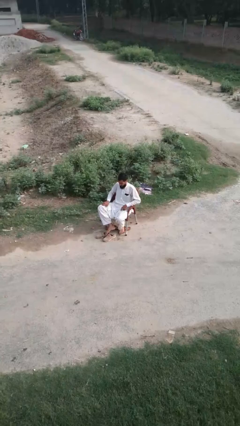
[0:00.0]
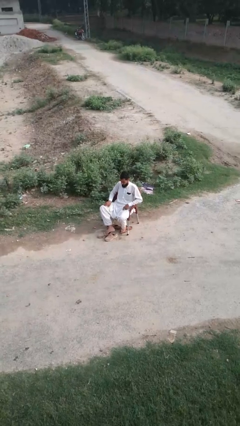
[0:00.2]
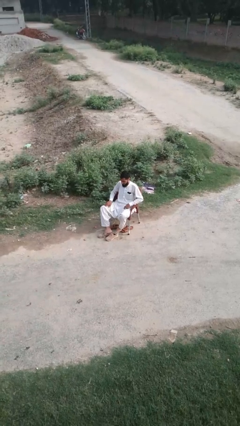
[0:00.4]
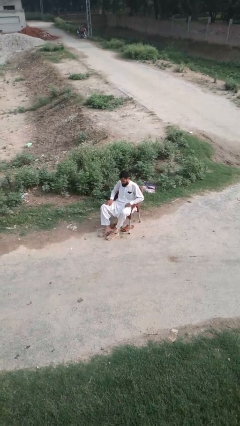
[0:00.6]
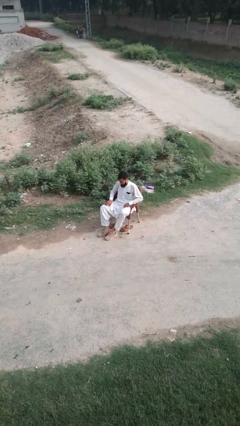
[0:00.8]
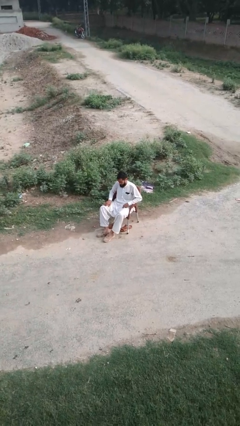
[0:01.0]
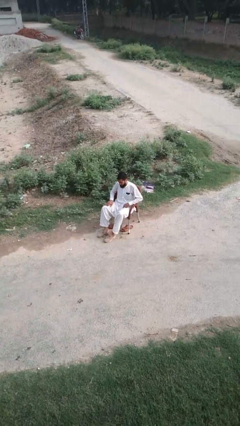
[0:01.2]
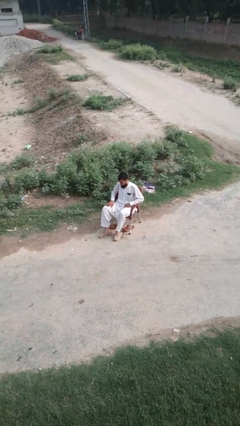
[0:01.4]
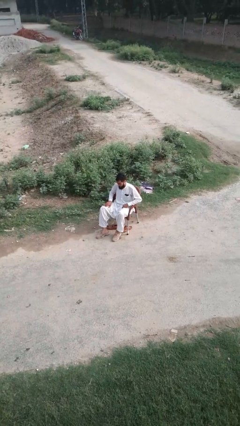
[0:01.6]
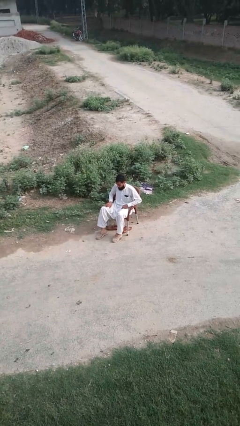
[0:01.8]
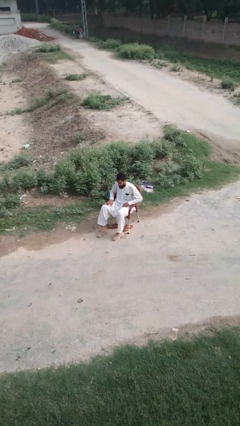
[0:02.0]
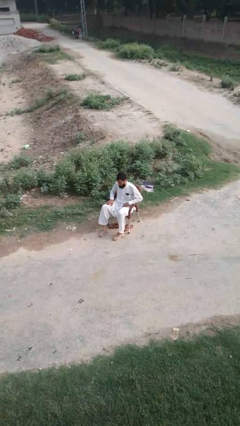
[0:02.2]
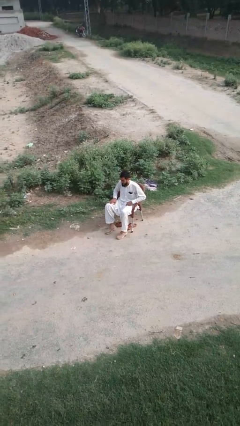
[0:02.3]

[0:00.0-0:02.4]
person puts on shoes

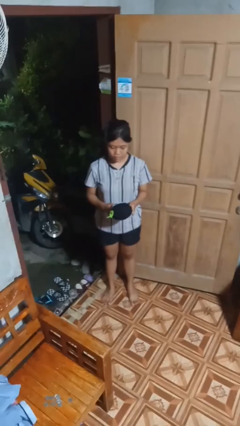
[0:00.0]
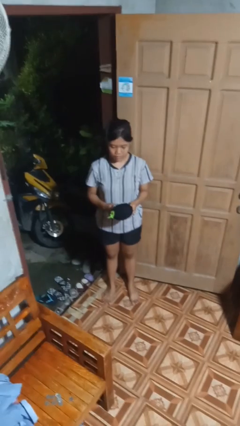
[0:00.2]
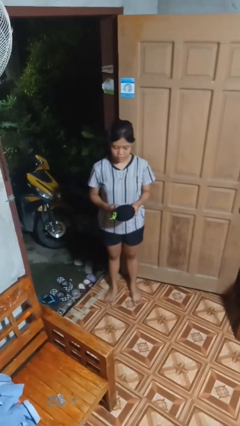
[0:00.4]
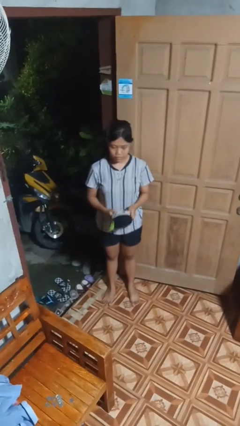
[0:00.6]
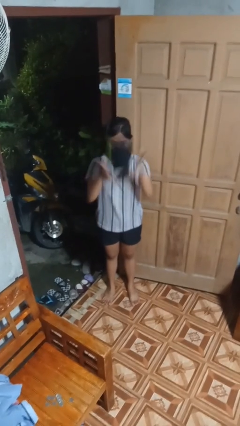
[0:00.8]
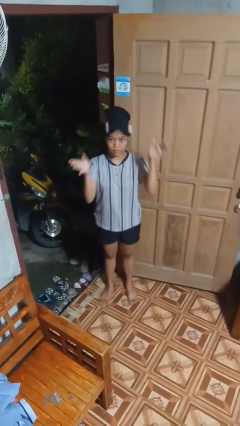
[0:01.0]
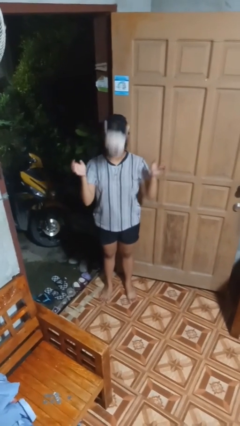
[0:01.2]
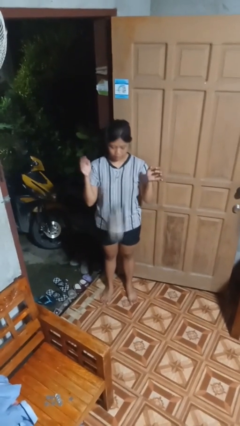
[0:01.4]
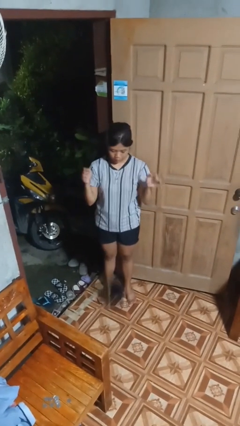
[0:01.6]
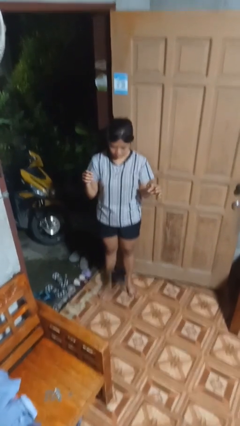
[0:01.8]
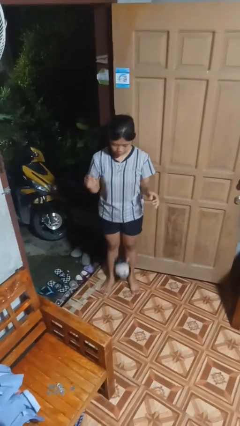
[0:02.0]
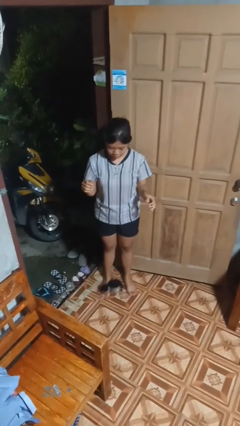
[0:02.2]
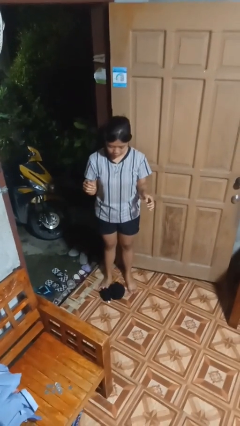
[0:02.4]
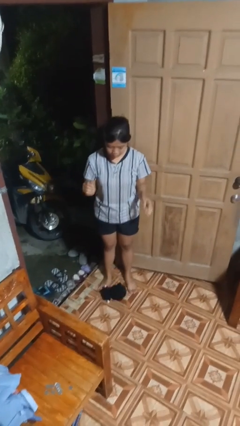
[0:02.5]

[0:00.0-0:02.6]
person throws object into air

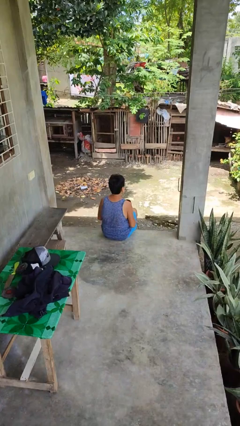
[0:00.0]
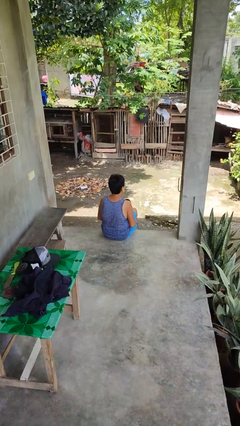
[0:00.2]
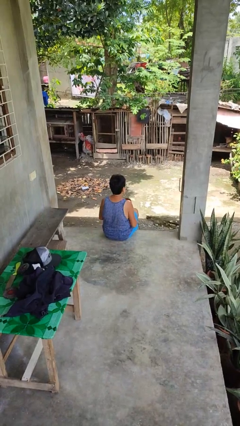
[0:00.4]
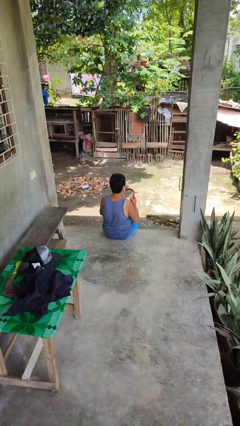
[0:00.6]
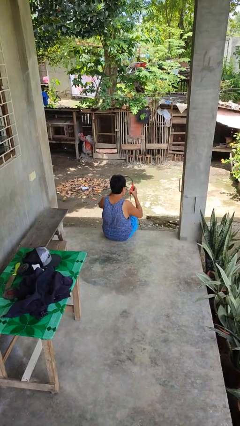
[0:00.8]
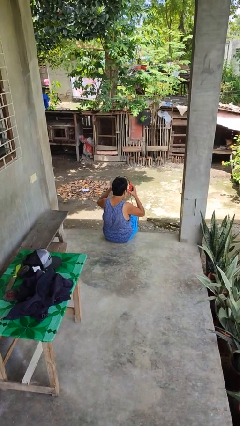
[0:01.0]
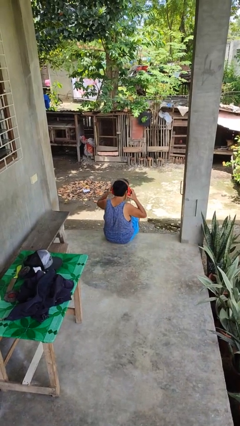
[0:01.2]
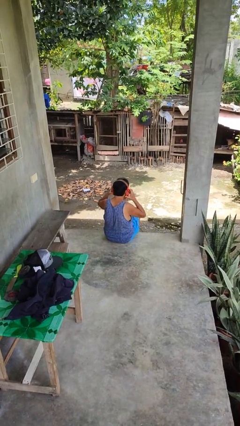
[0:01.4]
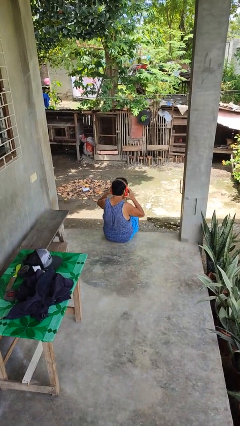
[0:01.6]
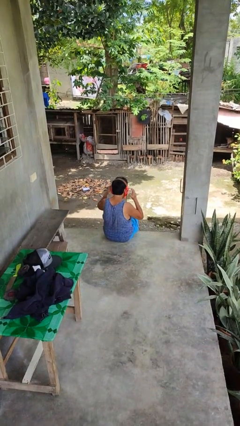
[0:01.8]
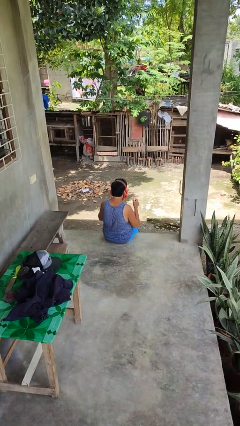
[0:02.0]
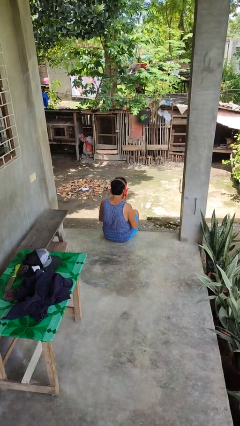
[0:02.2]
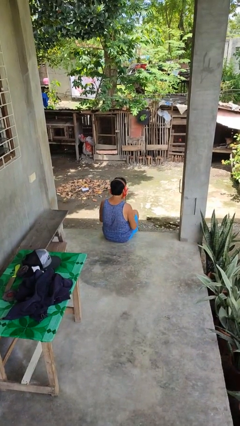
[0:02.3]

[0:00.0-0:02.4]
person puts on headphones

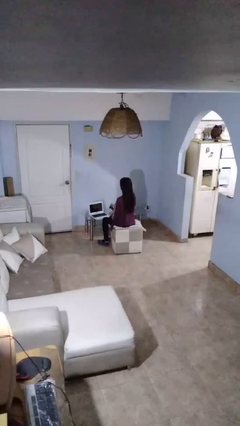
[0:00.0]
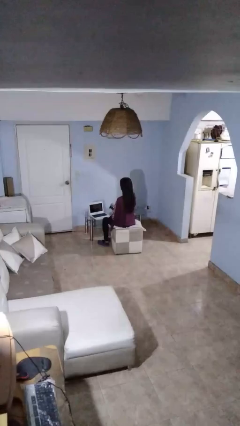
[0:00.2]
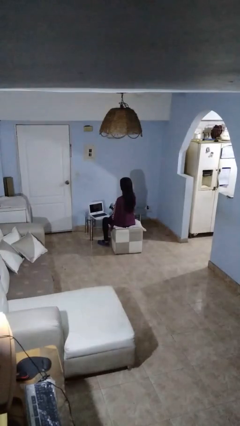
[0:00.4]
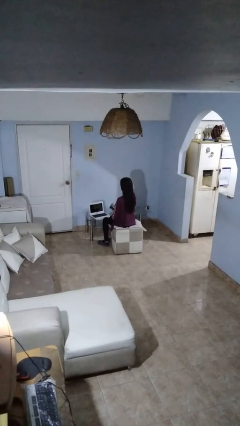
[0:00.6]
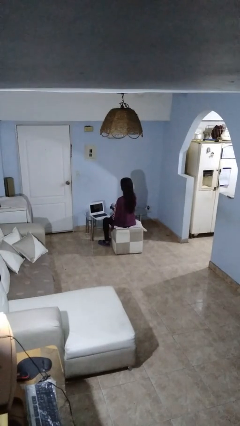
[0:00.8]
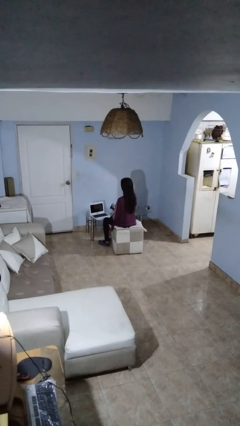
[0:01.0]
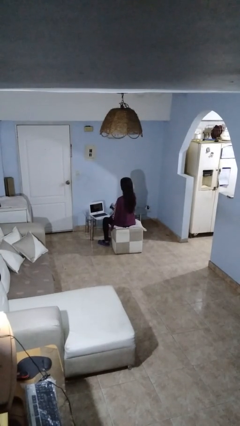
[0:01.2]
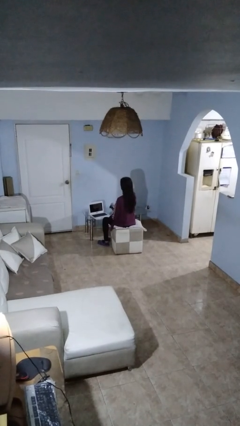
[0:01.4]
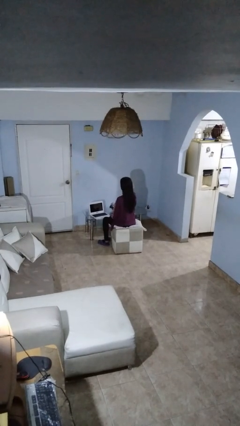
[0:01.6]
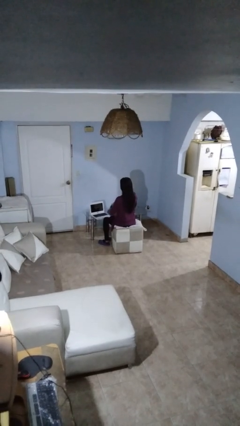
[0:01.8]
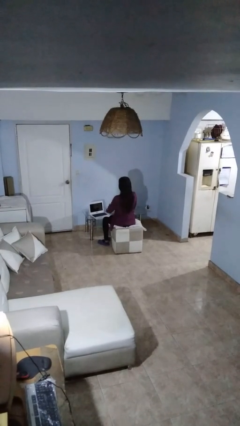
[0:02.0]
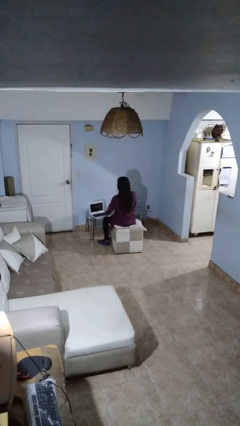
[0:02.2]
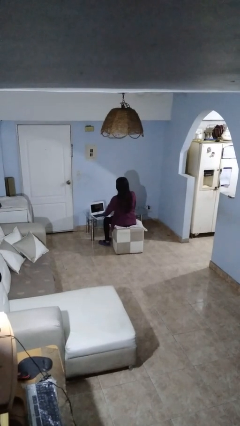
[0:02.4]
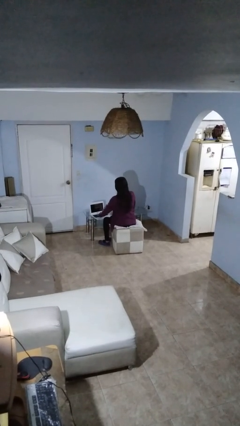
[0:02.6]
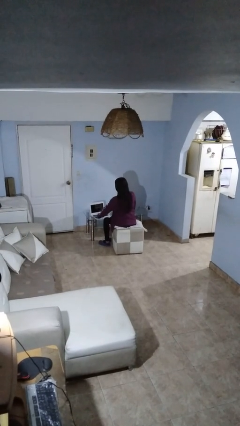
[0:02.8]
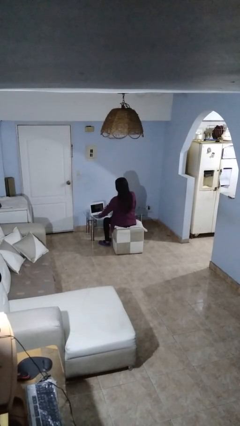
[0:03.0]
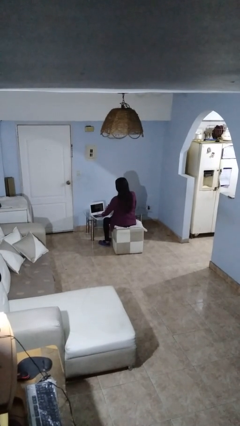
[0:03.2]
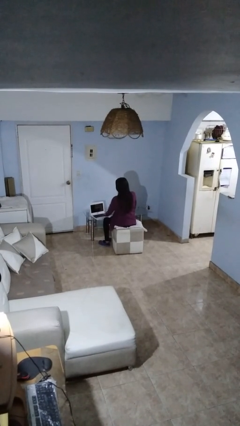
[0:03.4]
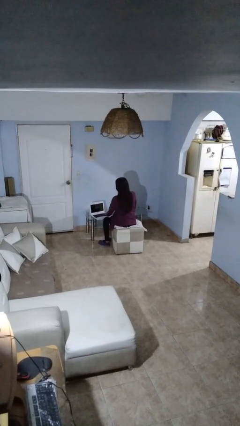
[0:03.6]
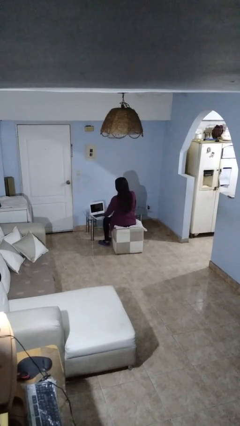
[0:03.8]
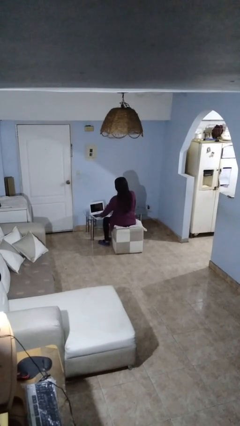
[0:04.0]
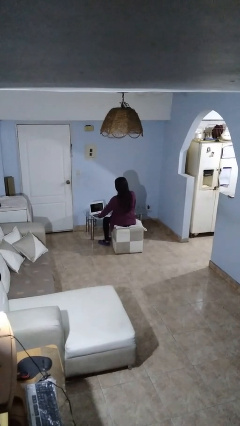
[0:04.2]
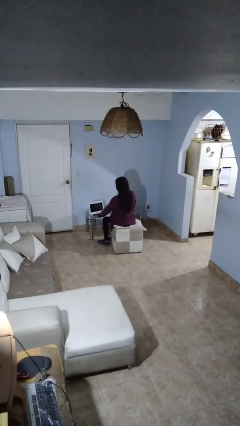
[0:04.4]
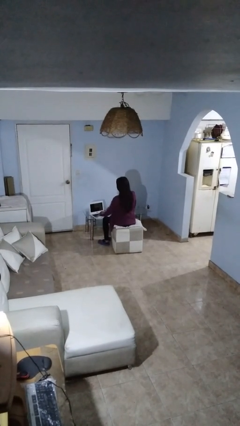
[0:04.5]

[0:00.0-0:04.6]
person waves hand over object

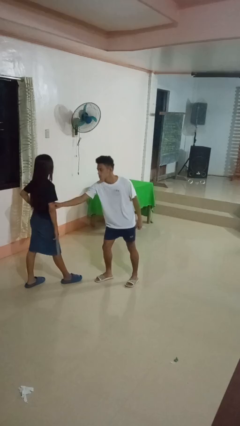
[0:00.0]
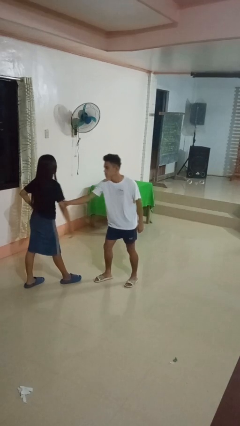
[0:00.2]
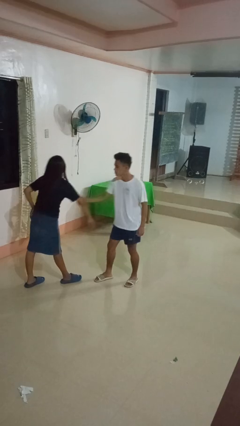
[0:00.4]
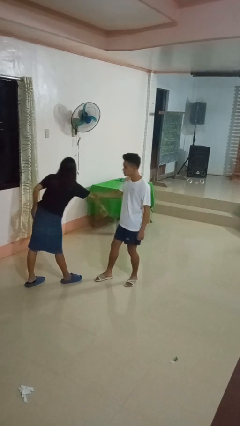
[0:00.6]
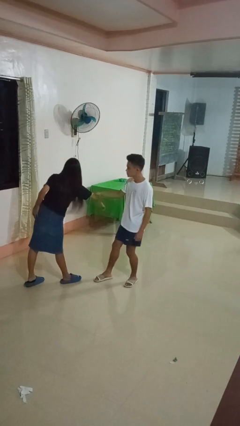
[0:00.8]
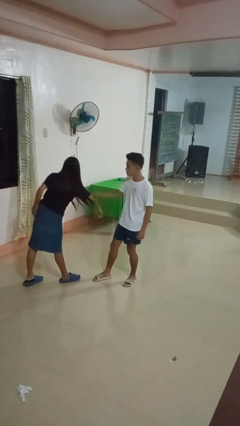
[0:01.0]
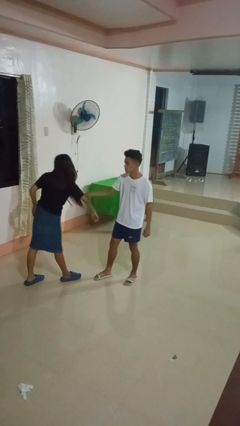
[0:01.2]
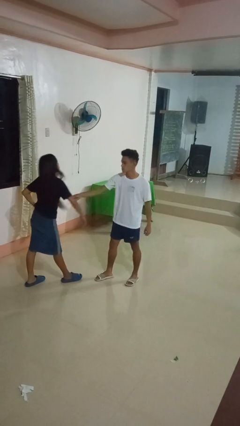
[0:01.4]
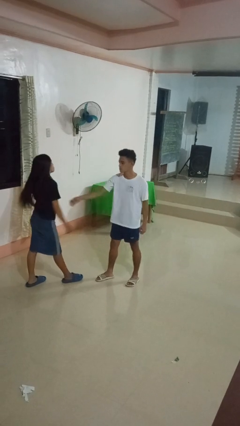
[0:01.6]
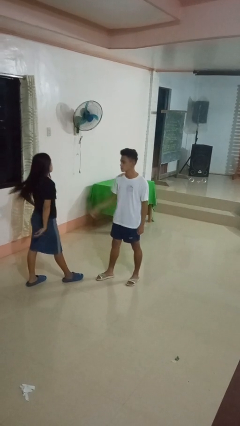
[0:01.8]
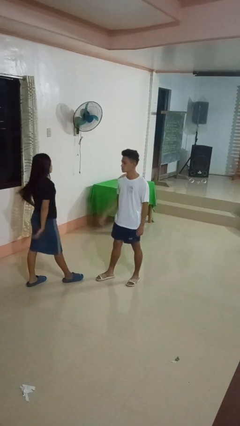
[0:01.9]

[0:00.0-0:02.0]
person grabs person by bicep

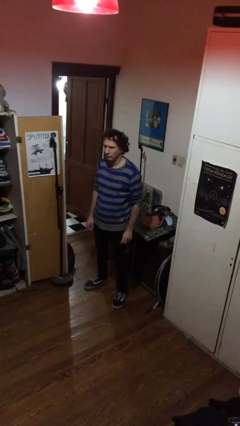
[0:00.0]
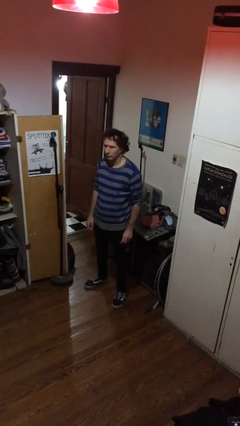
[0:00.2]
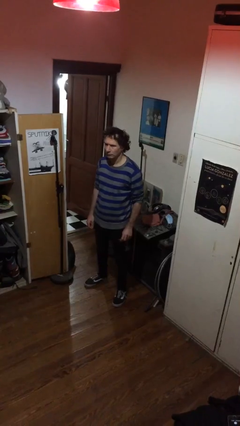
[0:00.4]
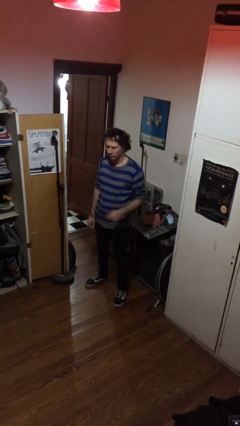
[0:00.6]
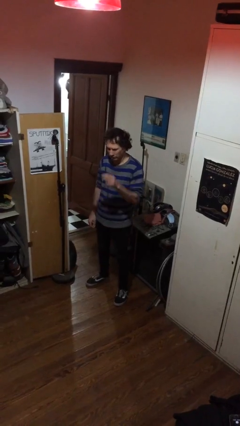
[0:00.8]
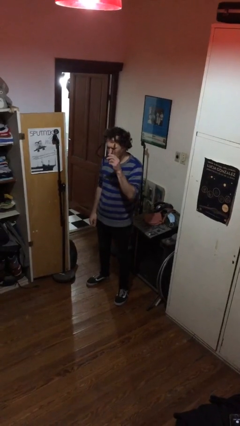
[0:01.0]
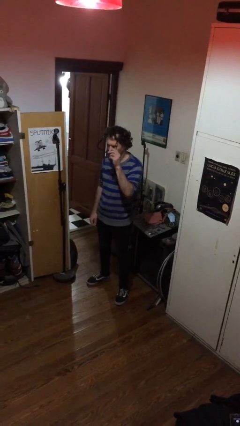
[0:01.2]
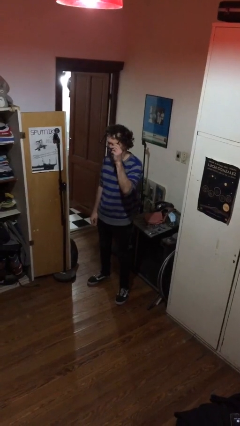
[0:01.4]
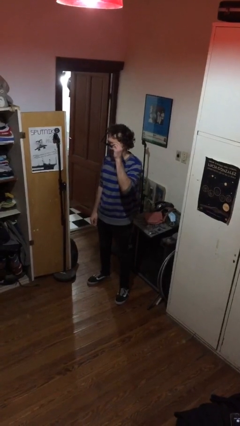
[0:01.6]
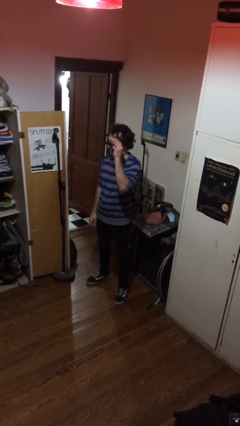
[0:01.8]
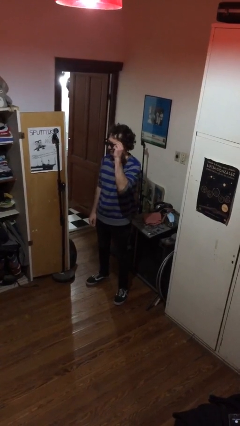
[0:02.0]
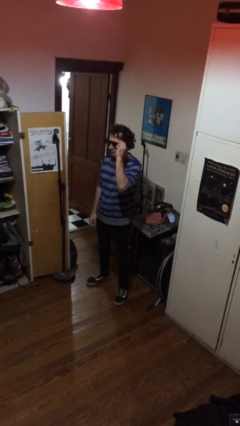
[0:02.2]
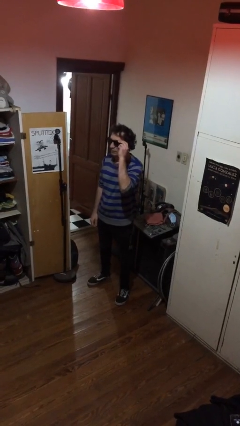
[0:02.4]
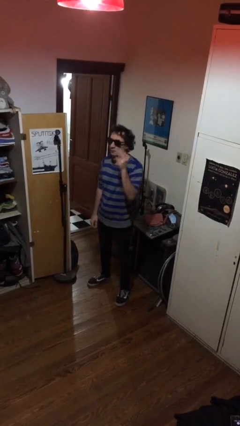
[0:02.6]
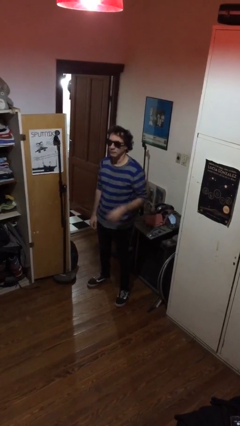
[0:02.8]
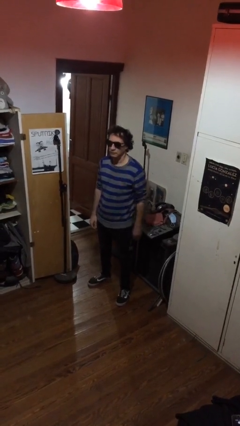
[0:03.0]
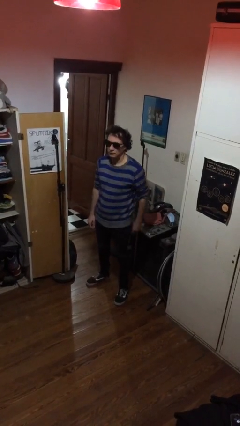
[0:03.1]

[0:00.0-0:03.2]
person puts on sunglasses
